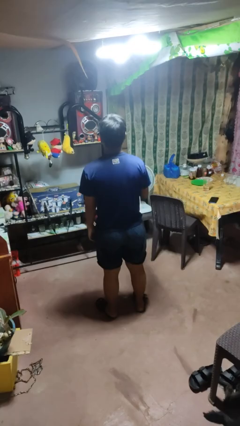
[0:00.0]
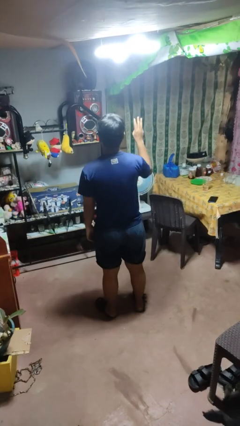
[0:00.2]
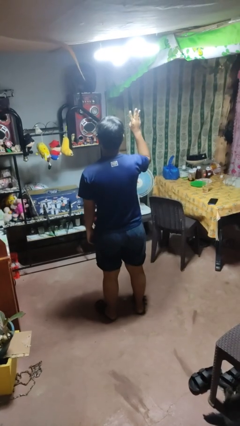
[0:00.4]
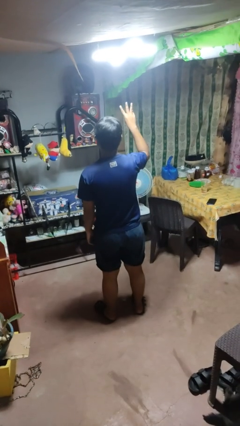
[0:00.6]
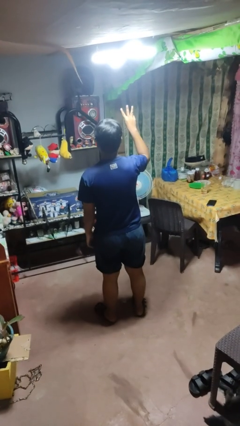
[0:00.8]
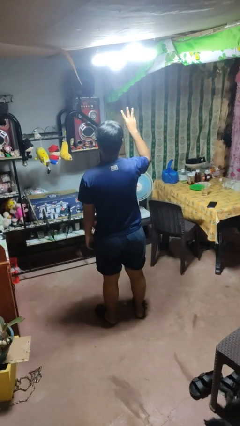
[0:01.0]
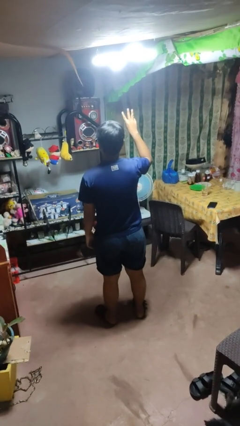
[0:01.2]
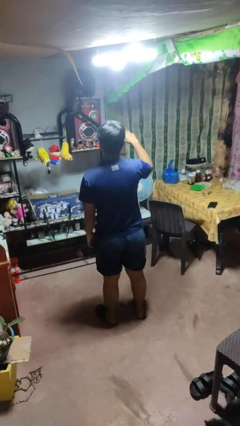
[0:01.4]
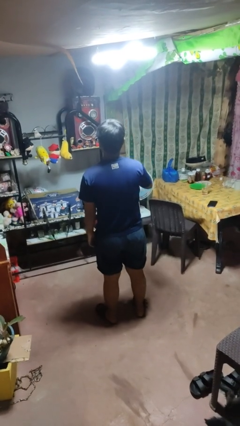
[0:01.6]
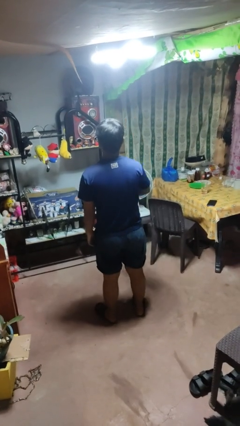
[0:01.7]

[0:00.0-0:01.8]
person gestures number three

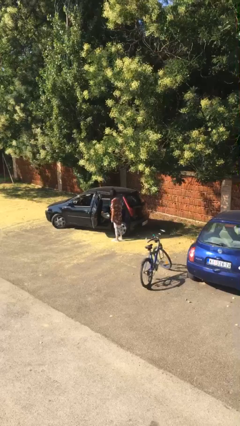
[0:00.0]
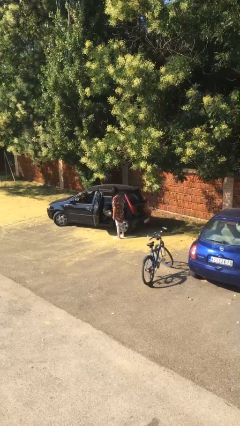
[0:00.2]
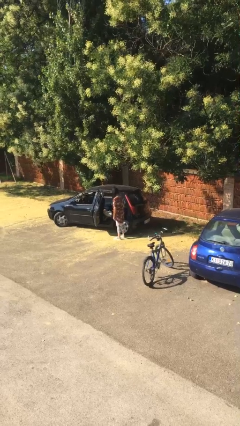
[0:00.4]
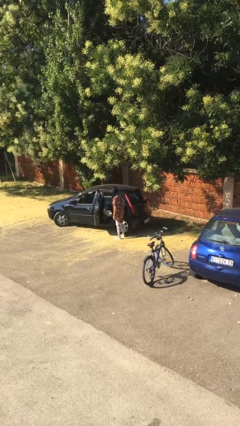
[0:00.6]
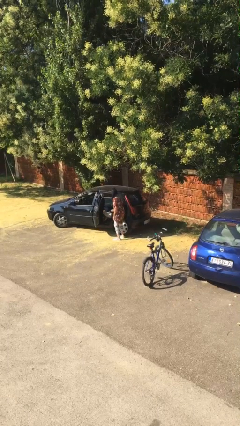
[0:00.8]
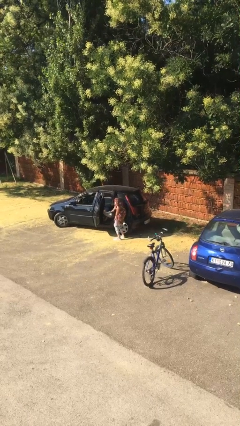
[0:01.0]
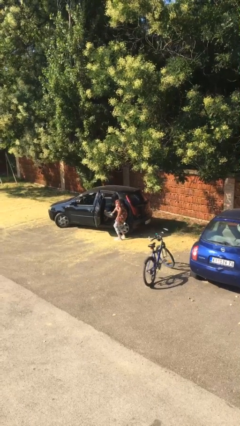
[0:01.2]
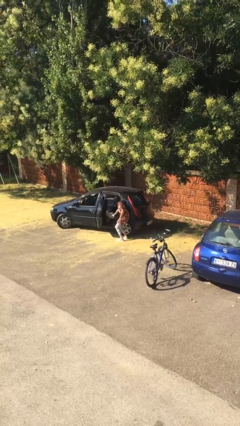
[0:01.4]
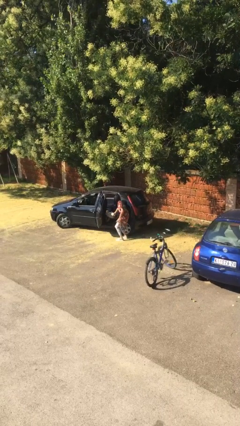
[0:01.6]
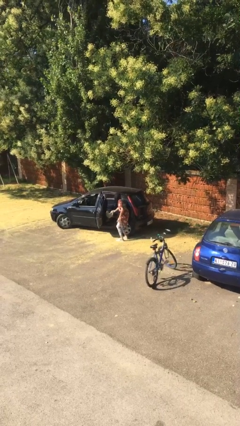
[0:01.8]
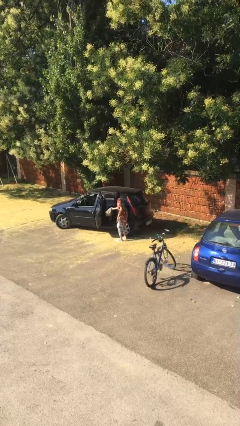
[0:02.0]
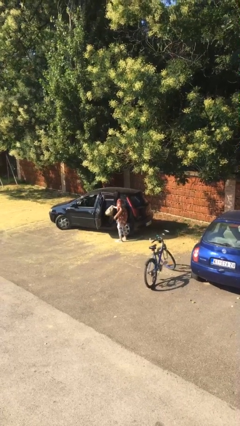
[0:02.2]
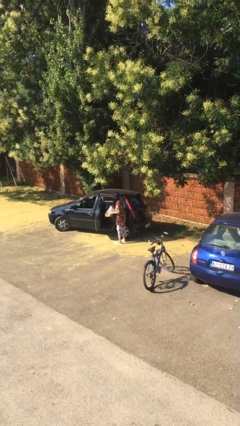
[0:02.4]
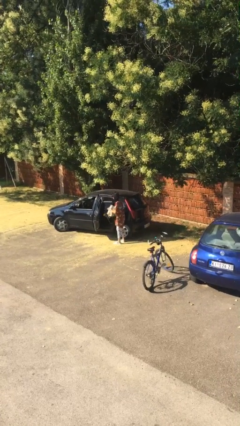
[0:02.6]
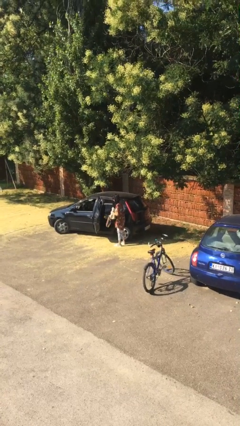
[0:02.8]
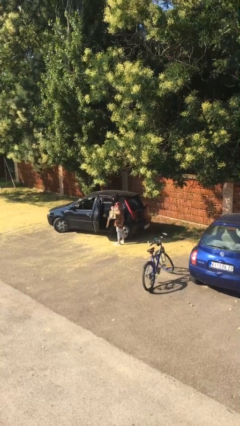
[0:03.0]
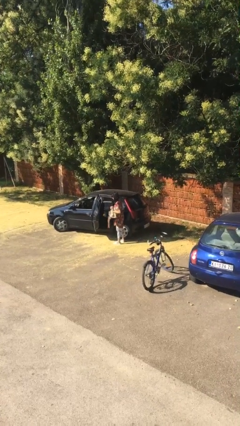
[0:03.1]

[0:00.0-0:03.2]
person unloads car

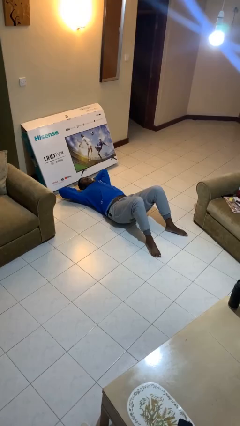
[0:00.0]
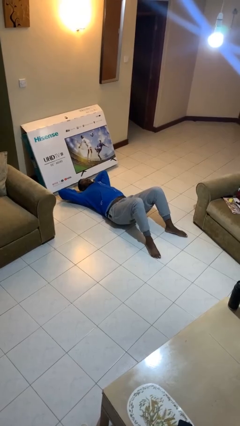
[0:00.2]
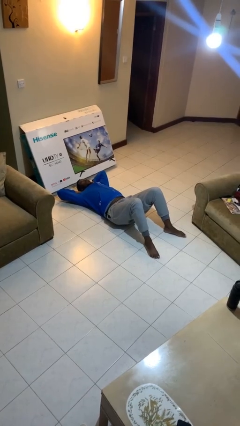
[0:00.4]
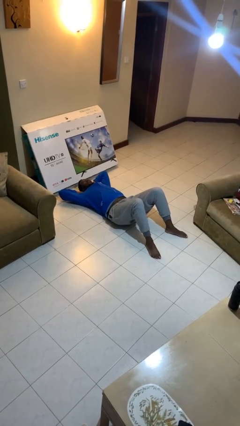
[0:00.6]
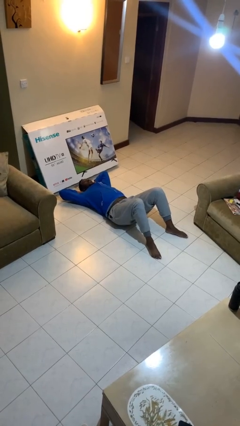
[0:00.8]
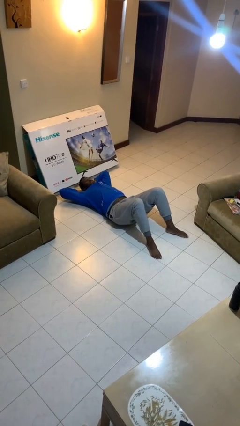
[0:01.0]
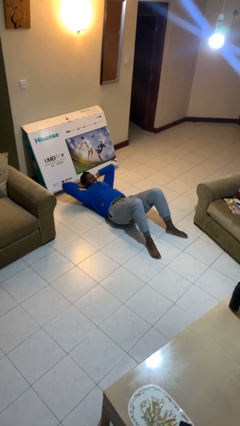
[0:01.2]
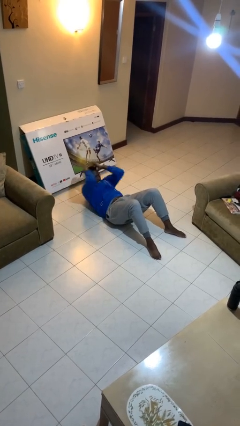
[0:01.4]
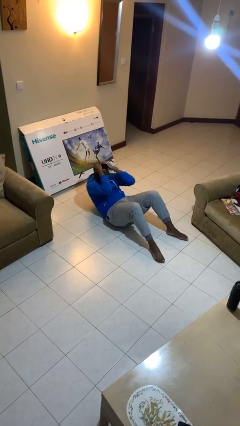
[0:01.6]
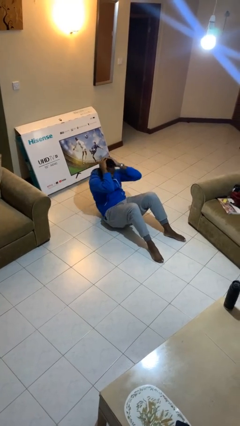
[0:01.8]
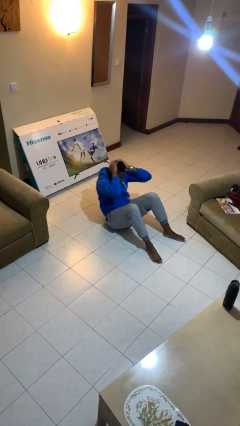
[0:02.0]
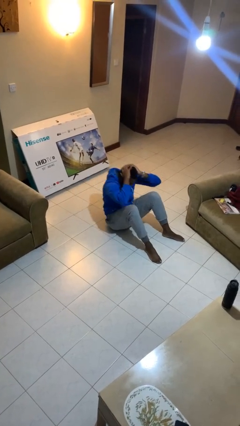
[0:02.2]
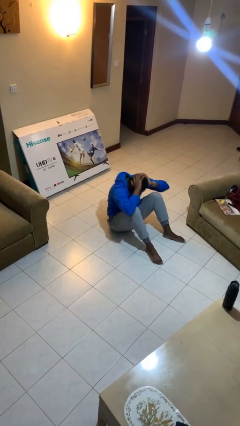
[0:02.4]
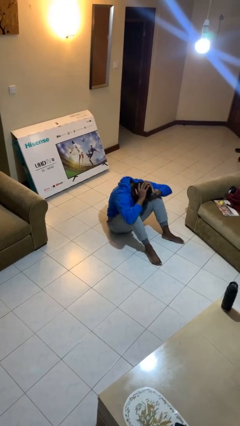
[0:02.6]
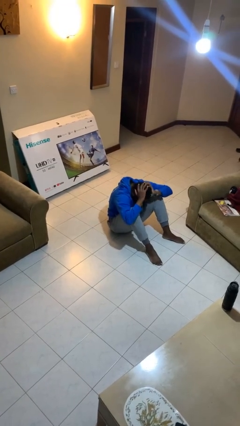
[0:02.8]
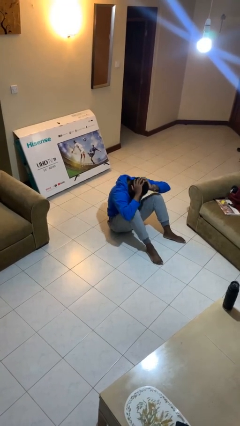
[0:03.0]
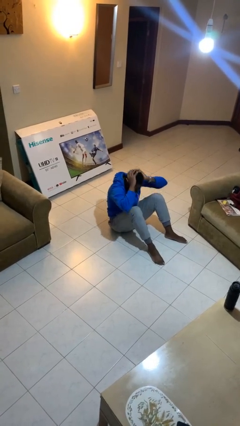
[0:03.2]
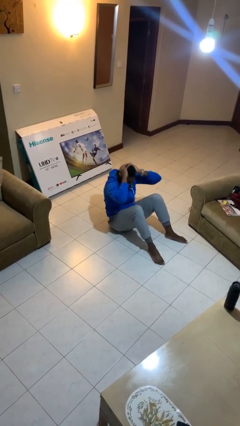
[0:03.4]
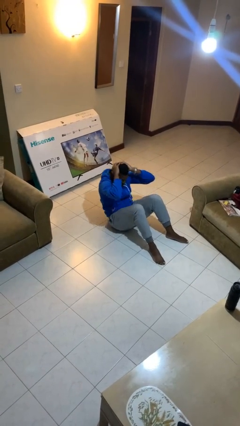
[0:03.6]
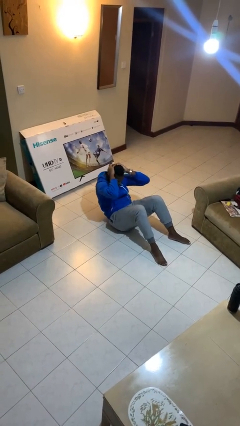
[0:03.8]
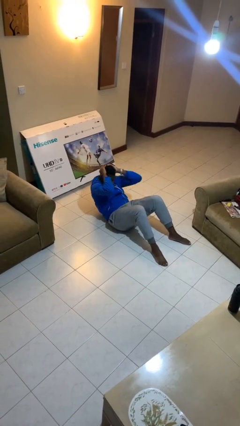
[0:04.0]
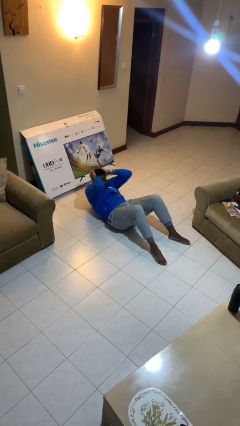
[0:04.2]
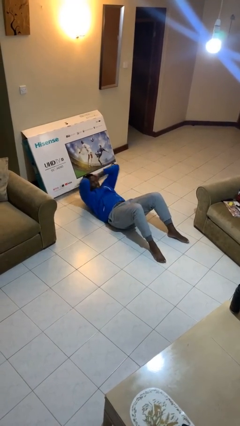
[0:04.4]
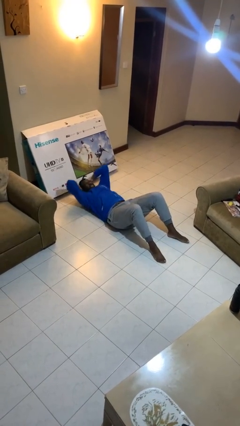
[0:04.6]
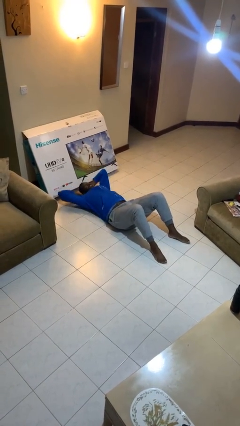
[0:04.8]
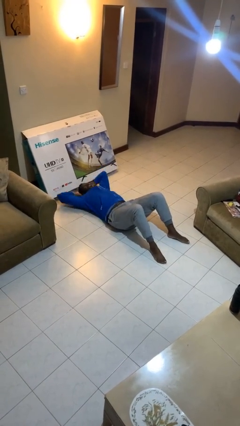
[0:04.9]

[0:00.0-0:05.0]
person exercises with situp

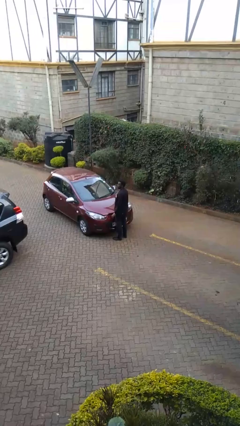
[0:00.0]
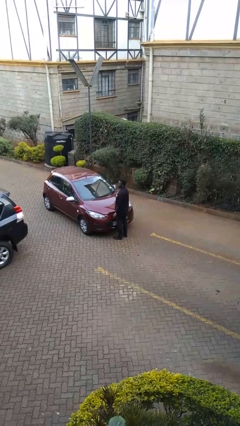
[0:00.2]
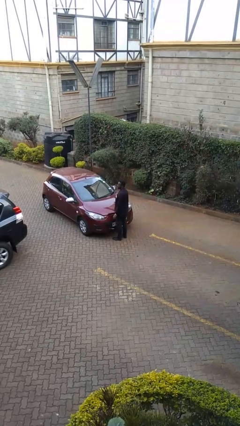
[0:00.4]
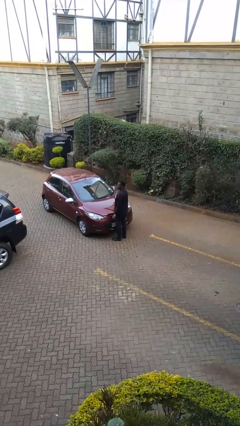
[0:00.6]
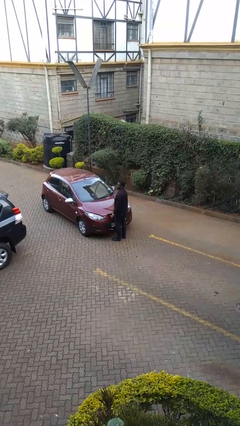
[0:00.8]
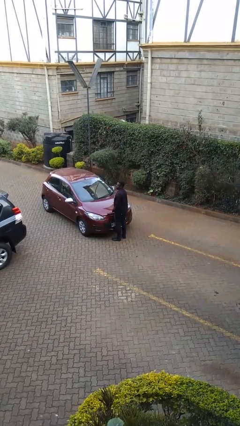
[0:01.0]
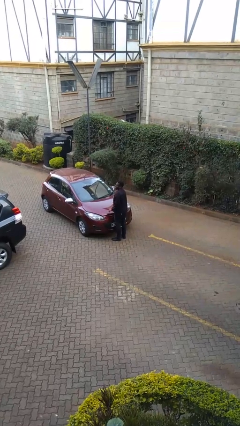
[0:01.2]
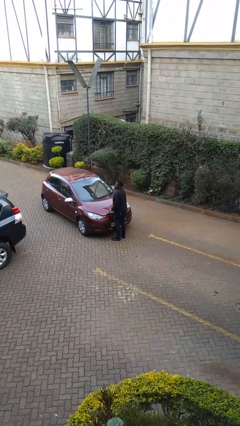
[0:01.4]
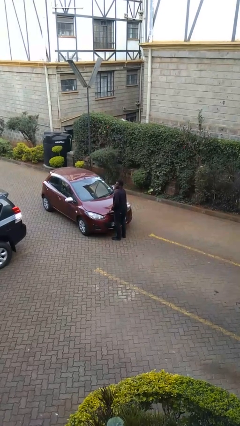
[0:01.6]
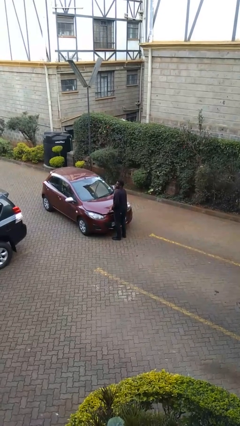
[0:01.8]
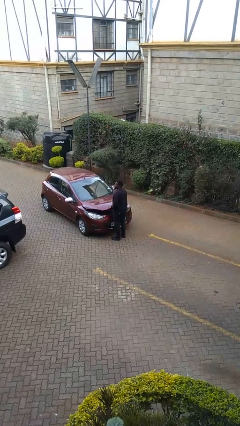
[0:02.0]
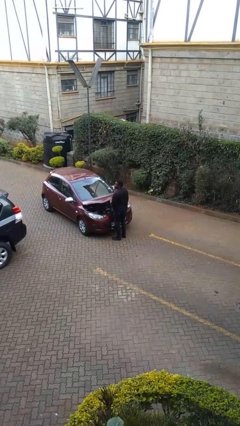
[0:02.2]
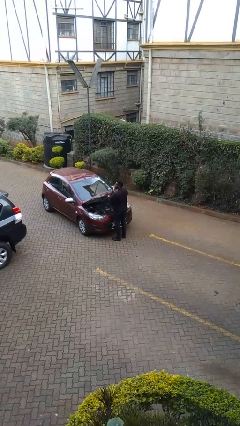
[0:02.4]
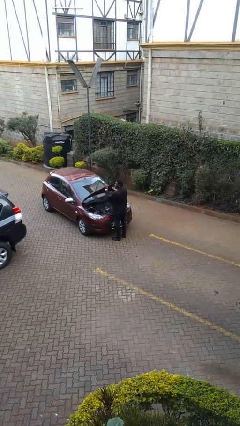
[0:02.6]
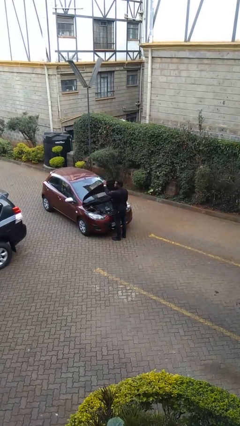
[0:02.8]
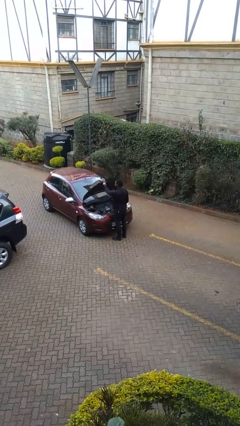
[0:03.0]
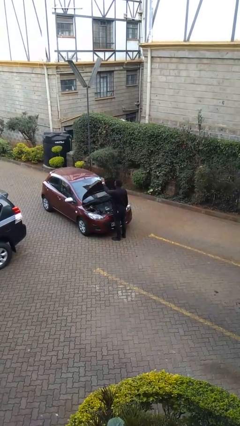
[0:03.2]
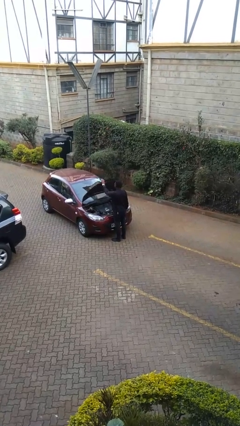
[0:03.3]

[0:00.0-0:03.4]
person opens car hood

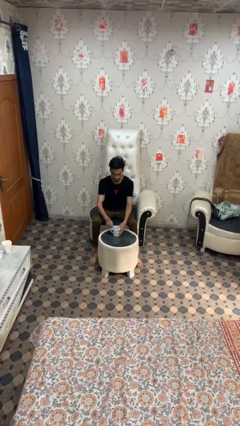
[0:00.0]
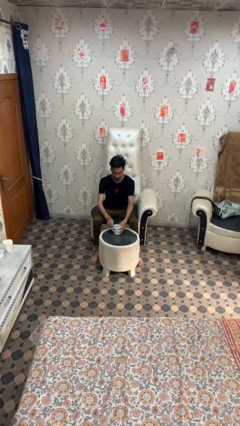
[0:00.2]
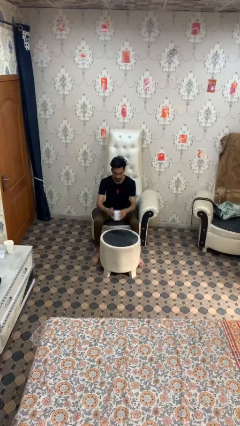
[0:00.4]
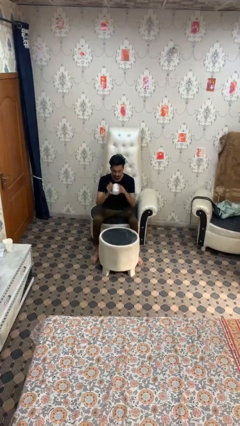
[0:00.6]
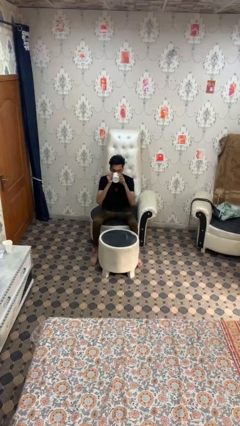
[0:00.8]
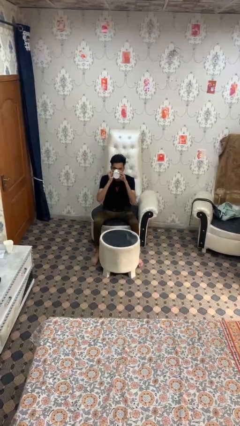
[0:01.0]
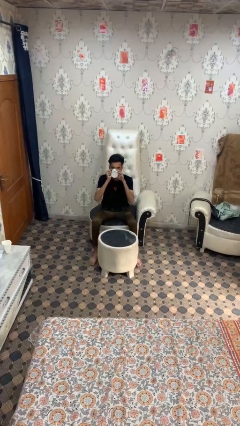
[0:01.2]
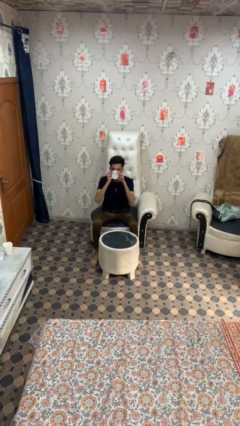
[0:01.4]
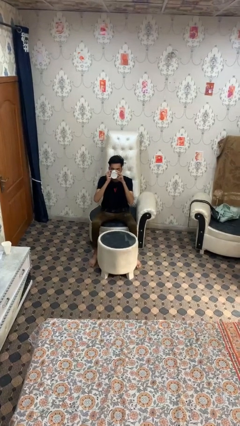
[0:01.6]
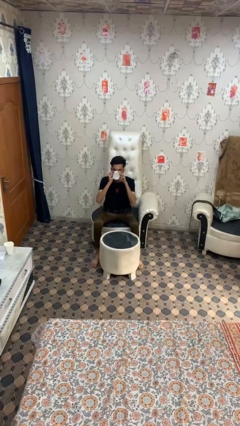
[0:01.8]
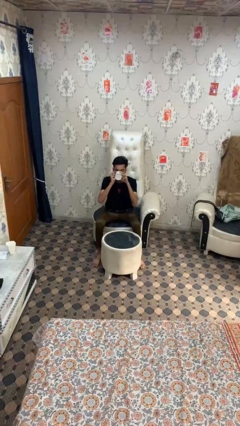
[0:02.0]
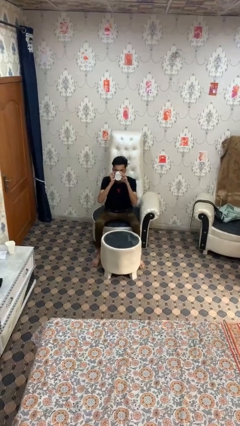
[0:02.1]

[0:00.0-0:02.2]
person drinks from mug

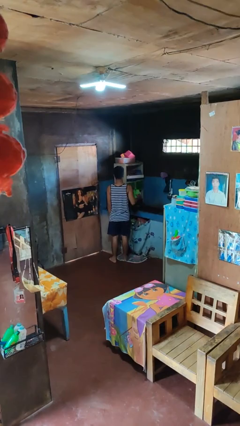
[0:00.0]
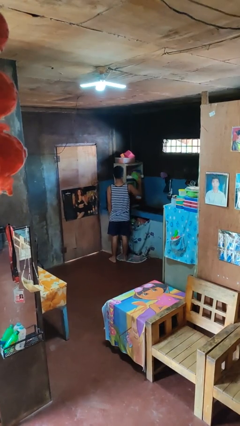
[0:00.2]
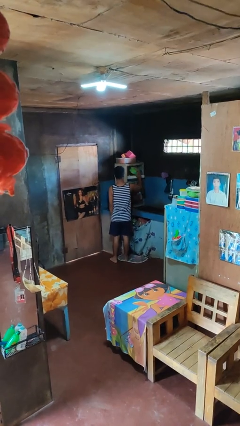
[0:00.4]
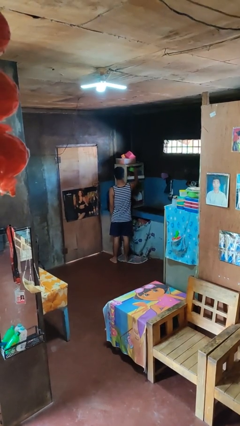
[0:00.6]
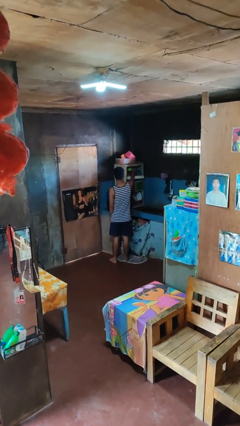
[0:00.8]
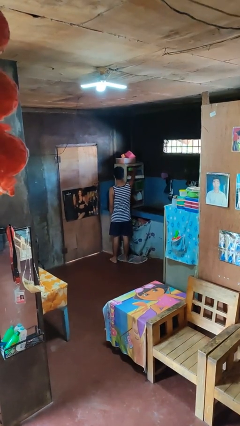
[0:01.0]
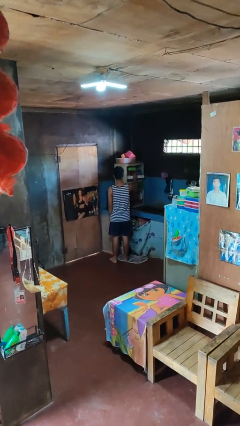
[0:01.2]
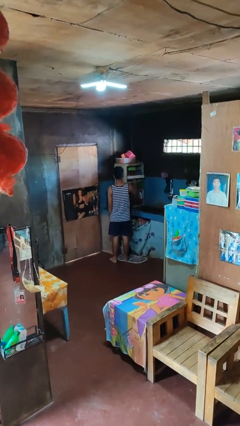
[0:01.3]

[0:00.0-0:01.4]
person puts object in cabinet

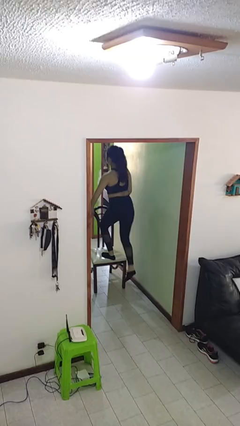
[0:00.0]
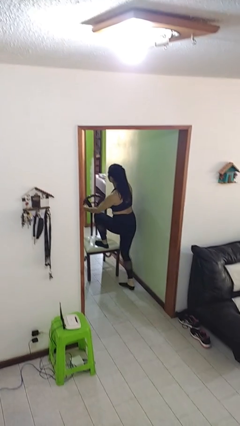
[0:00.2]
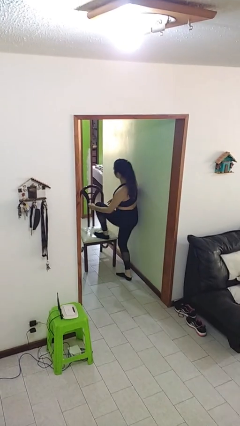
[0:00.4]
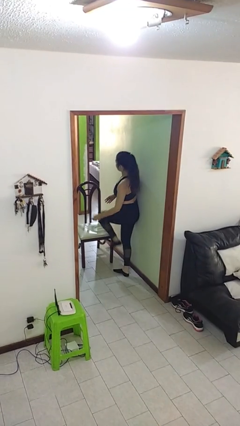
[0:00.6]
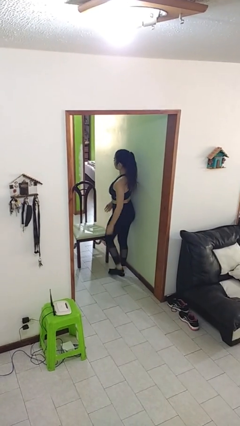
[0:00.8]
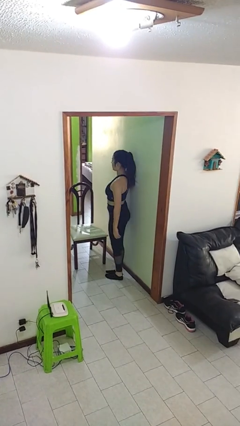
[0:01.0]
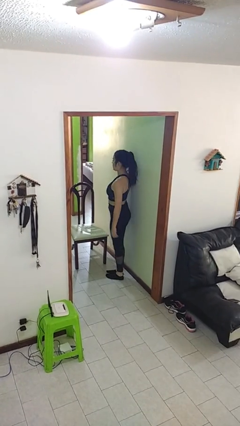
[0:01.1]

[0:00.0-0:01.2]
person climbs off chair
